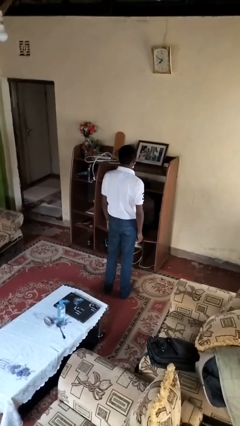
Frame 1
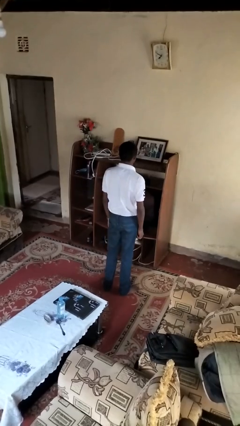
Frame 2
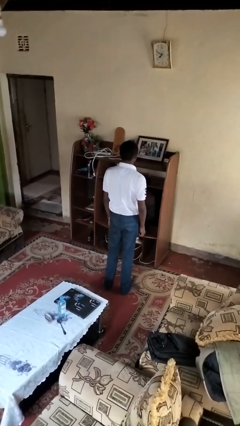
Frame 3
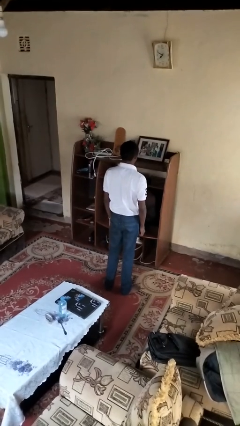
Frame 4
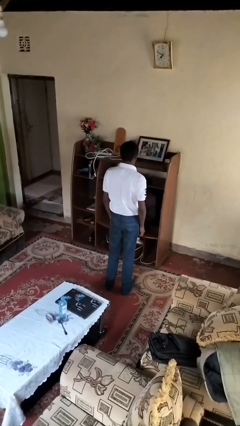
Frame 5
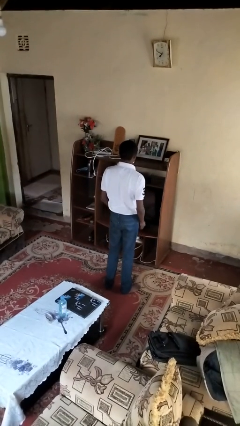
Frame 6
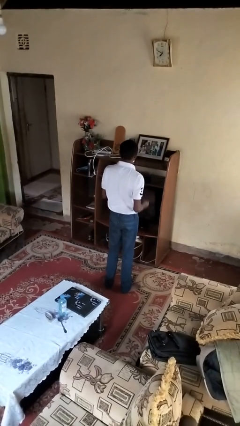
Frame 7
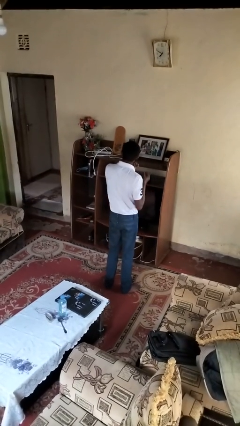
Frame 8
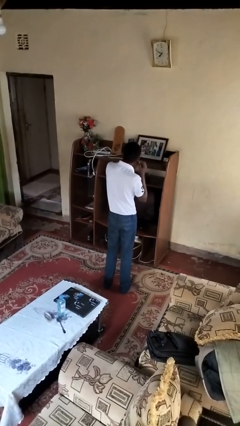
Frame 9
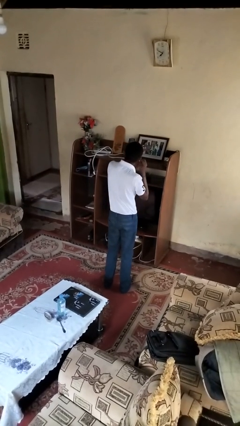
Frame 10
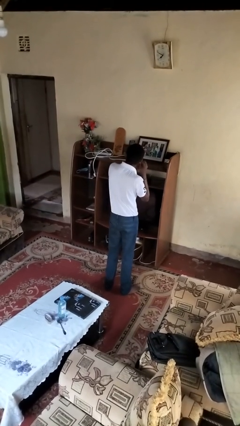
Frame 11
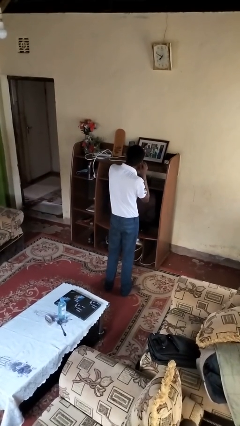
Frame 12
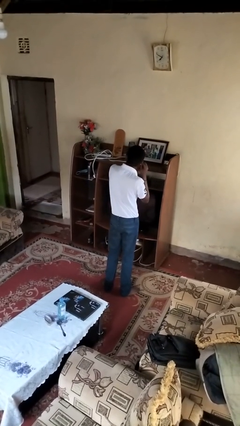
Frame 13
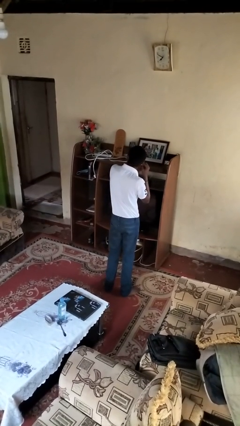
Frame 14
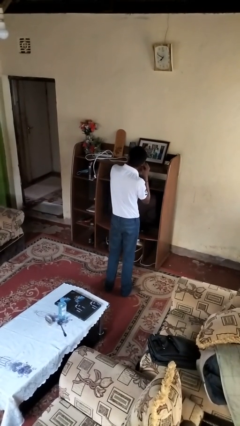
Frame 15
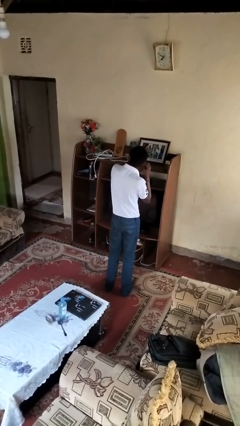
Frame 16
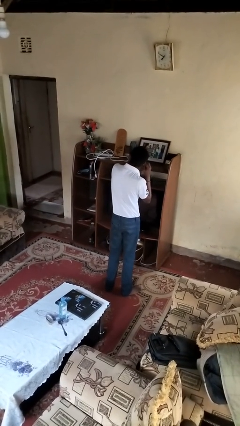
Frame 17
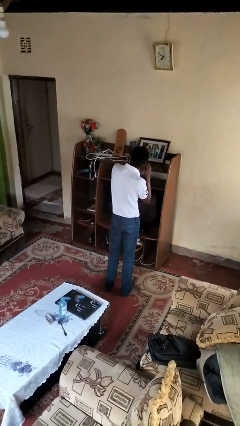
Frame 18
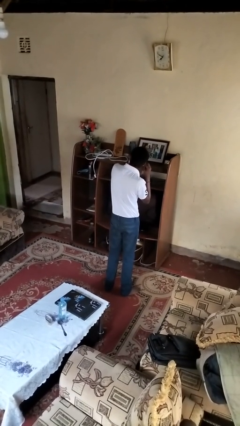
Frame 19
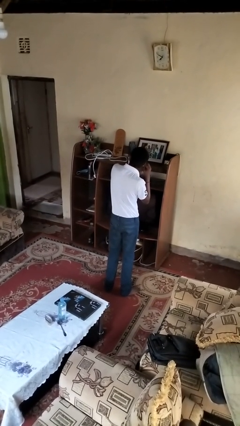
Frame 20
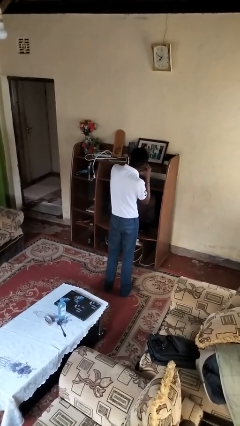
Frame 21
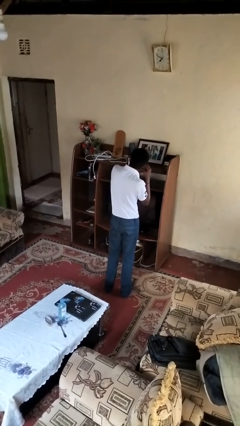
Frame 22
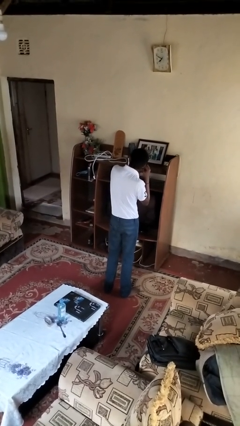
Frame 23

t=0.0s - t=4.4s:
person puts on earrings

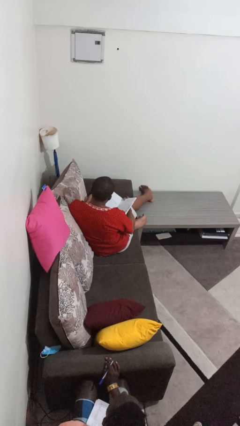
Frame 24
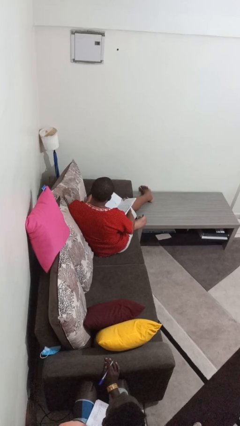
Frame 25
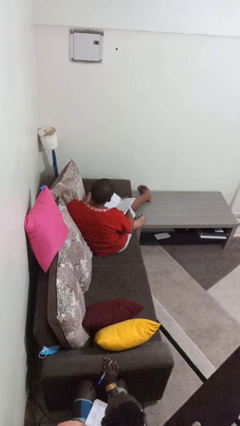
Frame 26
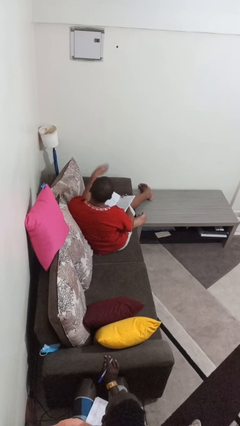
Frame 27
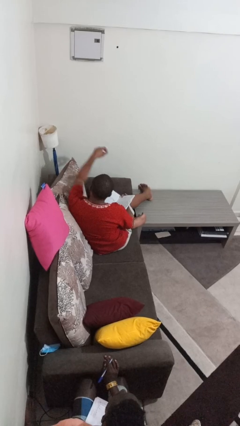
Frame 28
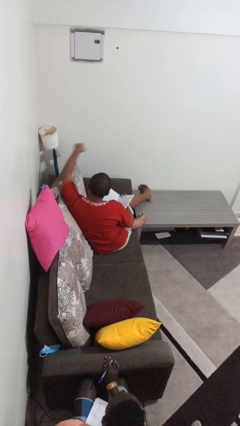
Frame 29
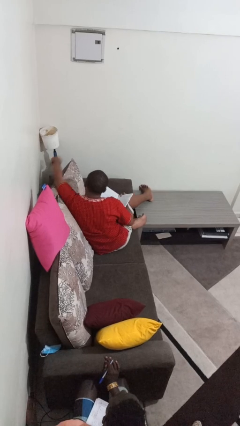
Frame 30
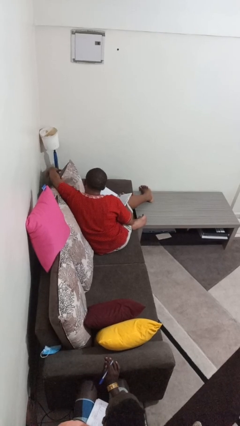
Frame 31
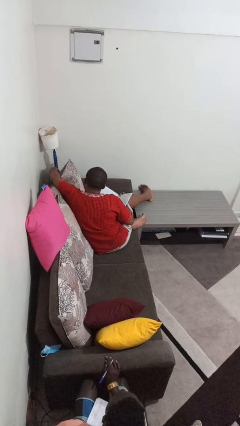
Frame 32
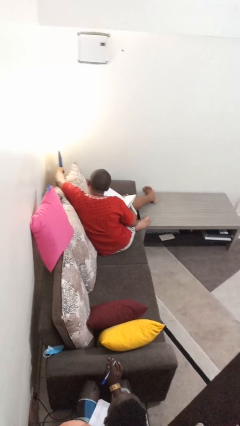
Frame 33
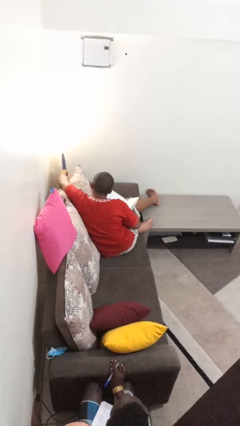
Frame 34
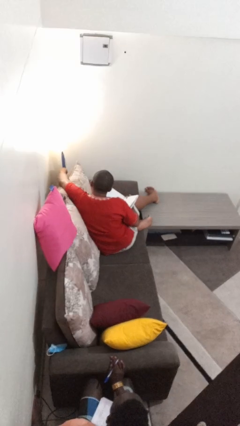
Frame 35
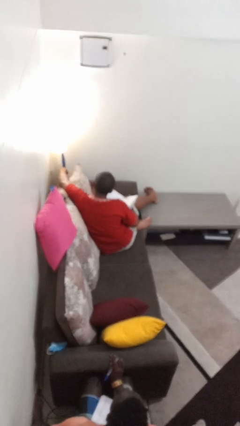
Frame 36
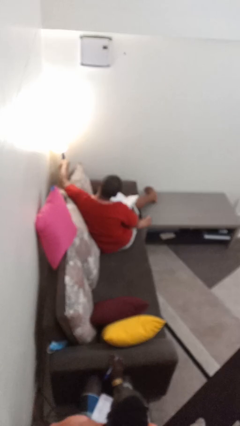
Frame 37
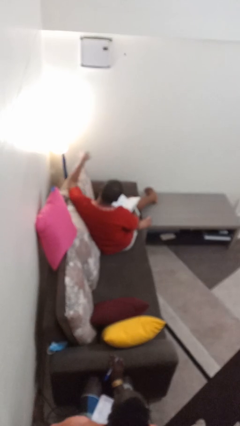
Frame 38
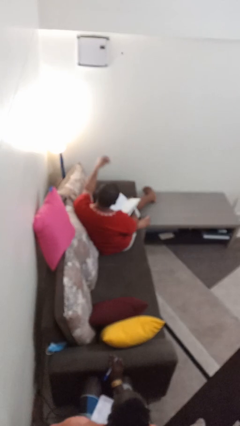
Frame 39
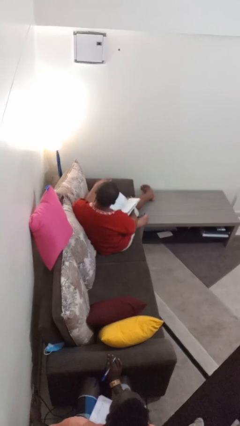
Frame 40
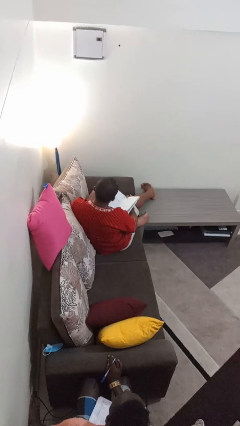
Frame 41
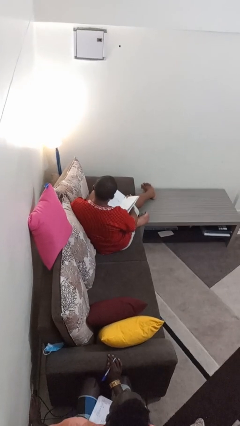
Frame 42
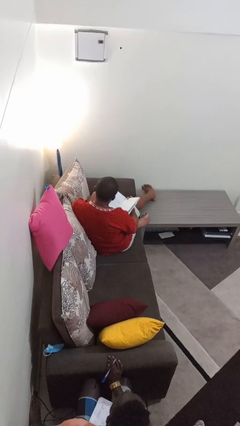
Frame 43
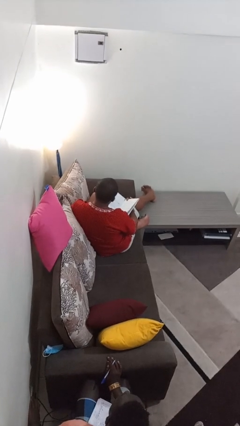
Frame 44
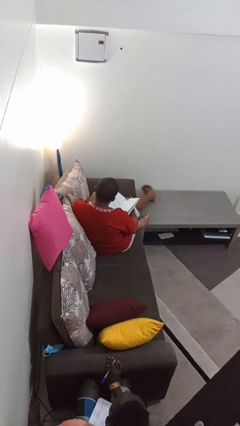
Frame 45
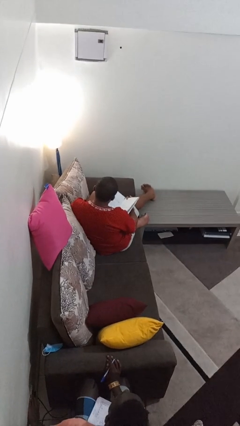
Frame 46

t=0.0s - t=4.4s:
person turns on lamp

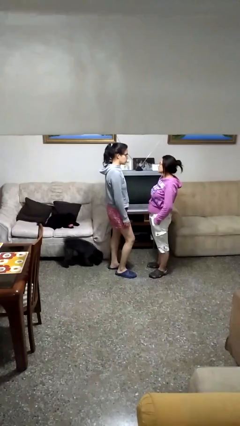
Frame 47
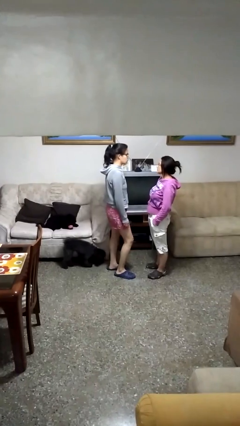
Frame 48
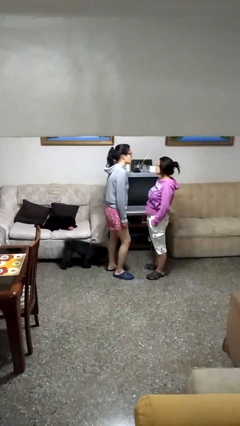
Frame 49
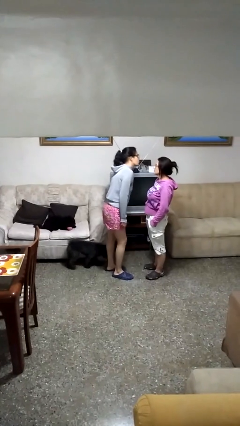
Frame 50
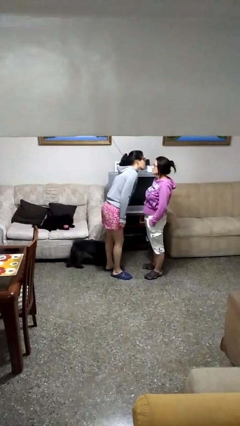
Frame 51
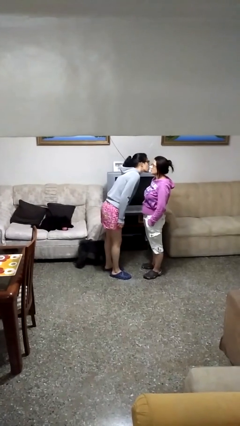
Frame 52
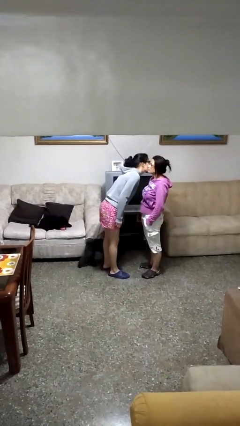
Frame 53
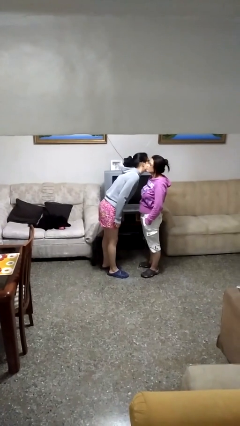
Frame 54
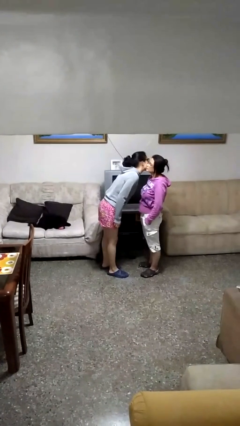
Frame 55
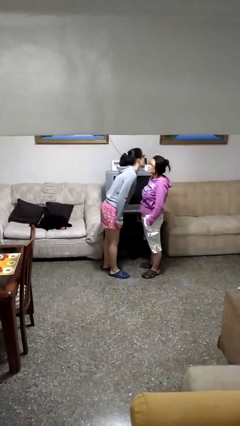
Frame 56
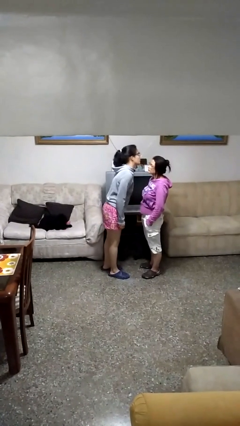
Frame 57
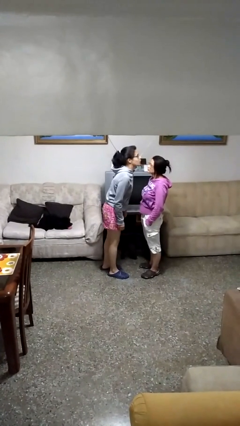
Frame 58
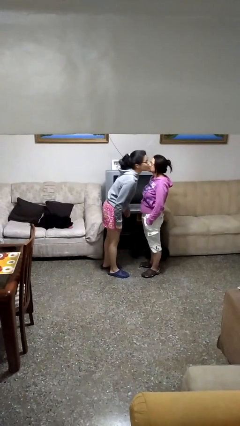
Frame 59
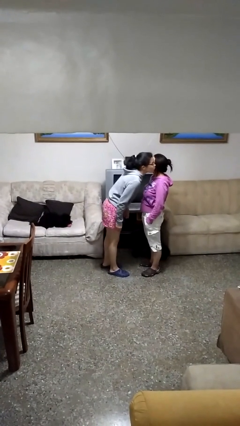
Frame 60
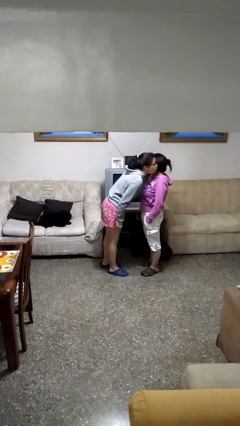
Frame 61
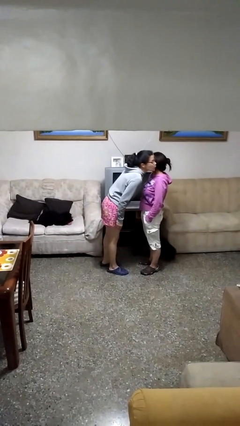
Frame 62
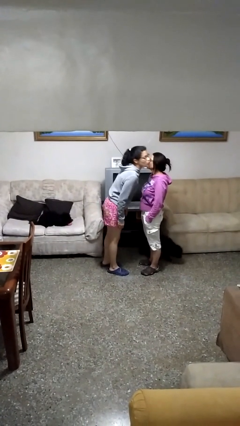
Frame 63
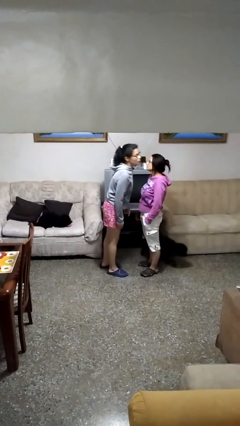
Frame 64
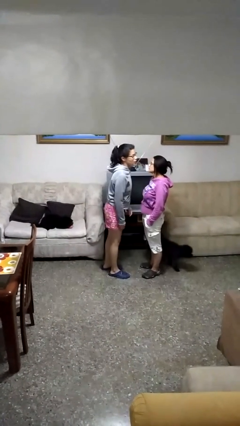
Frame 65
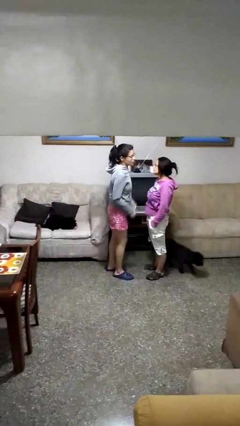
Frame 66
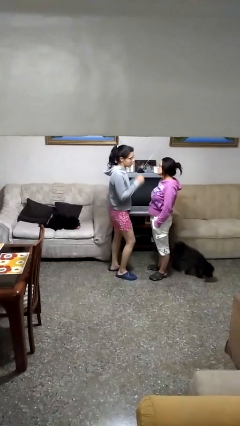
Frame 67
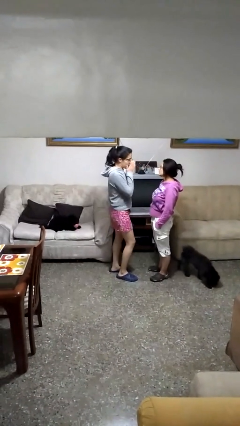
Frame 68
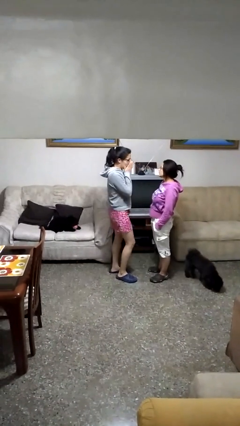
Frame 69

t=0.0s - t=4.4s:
person kisses cheek of person

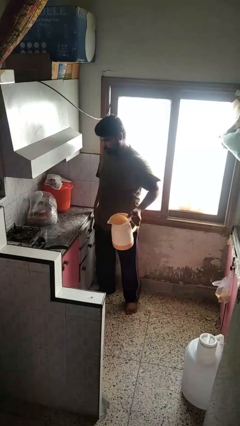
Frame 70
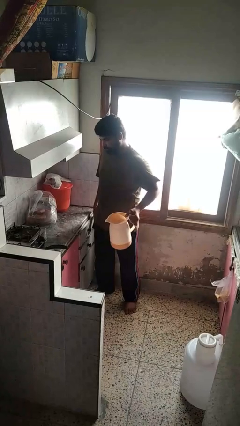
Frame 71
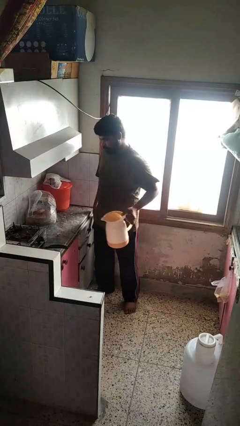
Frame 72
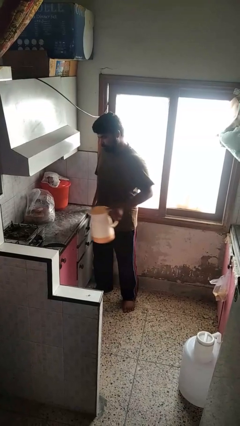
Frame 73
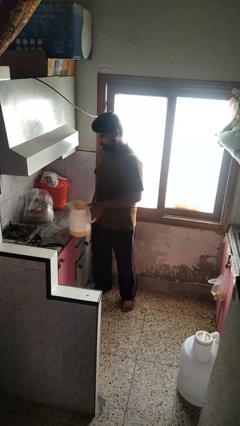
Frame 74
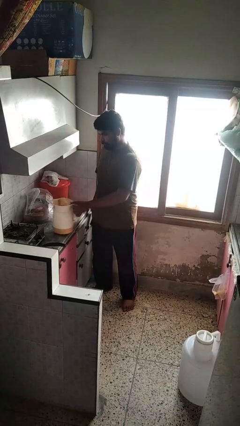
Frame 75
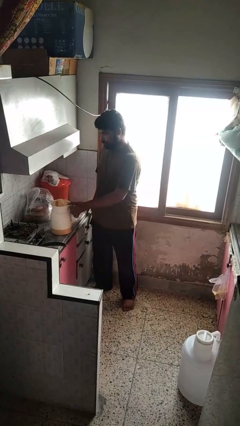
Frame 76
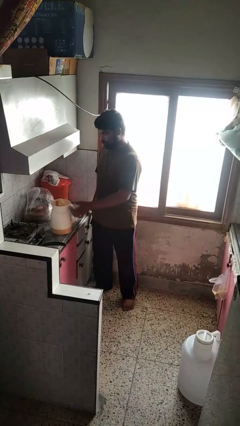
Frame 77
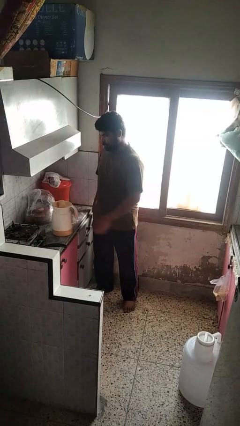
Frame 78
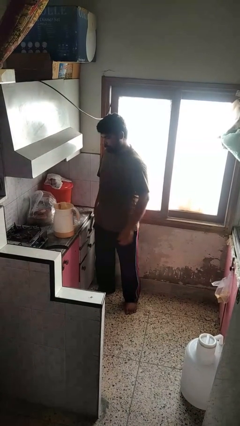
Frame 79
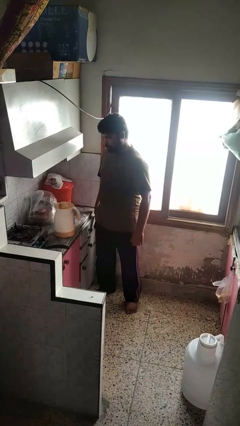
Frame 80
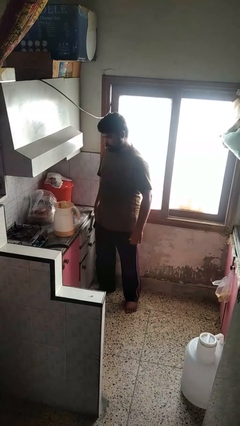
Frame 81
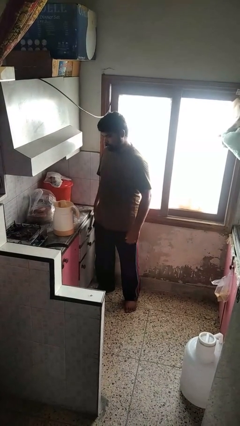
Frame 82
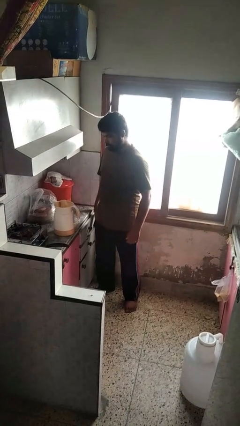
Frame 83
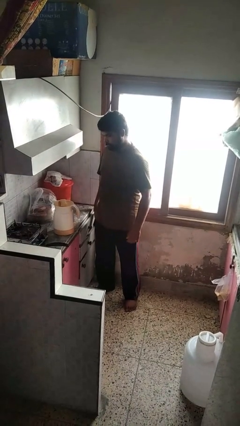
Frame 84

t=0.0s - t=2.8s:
person puts down object on countertop

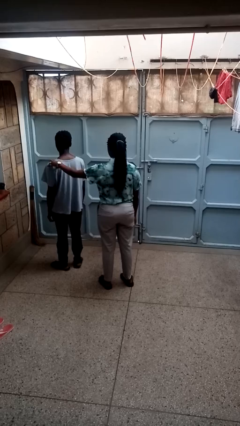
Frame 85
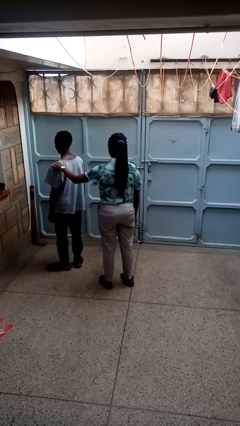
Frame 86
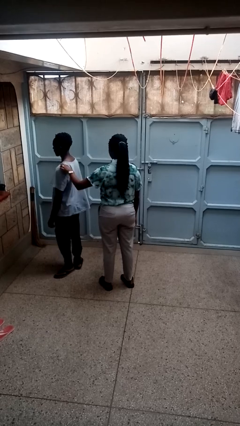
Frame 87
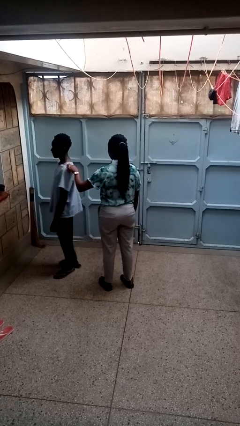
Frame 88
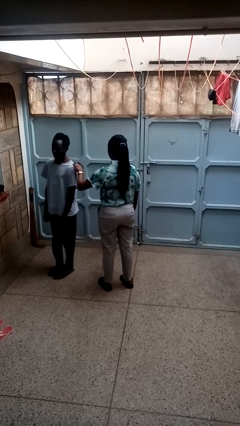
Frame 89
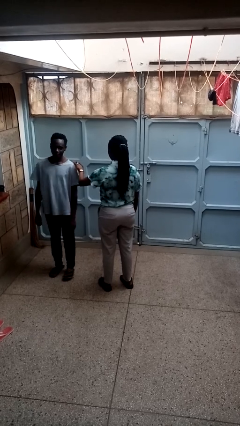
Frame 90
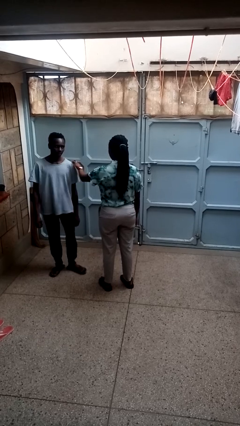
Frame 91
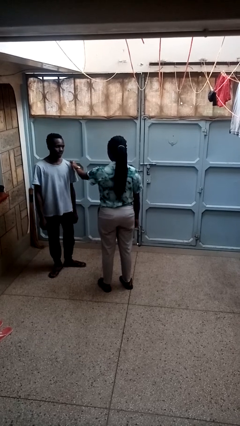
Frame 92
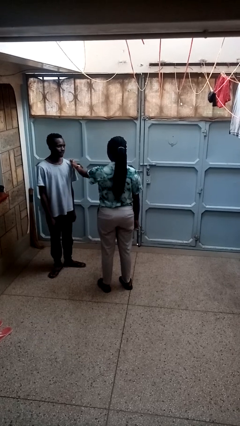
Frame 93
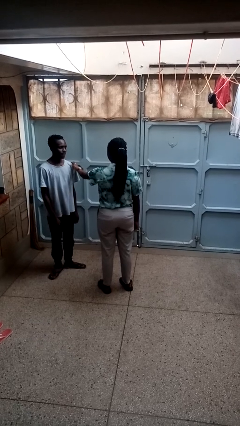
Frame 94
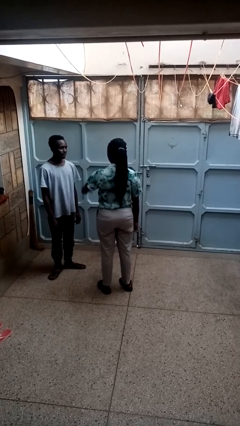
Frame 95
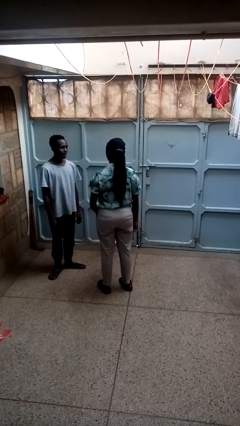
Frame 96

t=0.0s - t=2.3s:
person spins person around
